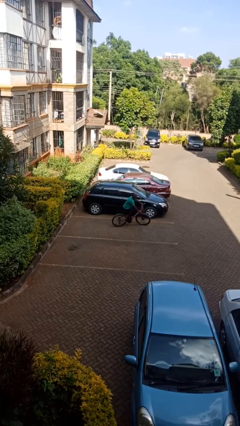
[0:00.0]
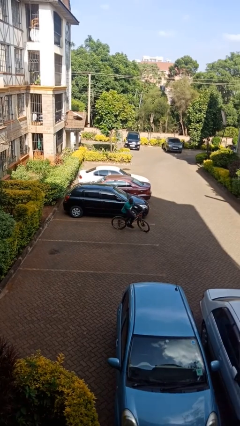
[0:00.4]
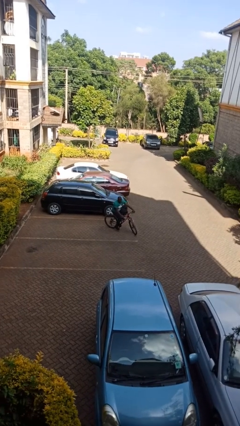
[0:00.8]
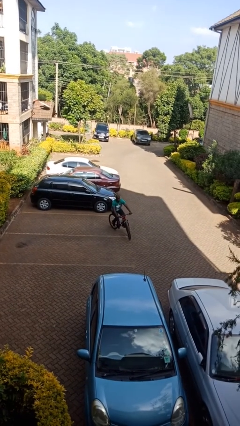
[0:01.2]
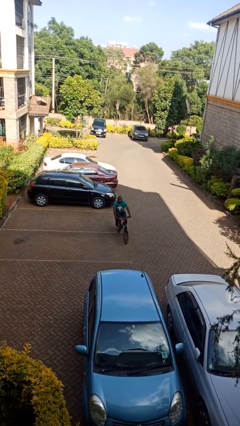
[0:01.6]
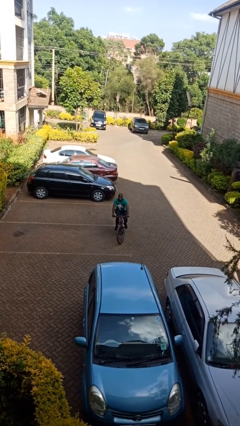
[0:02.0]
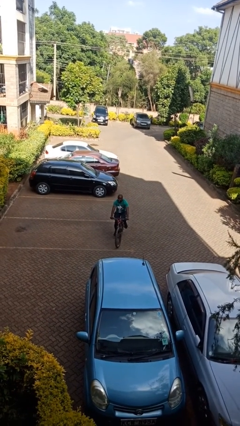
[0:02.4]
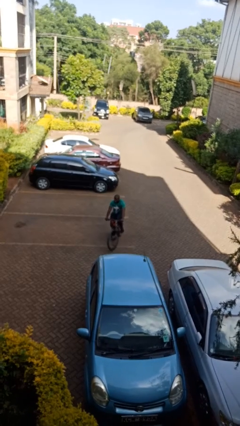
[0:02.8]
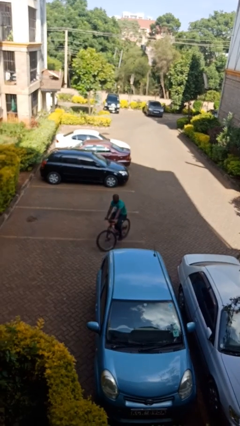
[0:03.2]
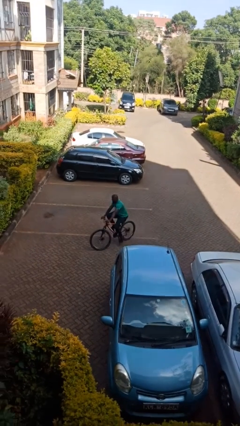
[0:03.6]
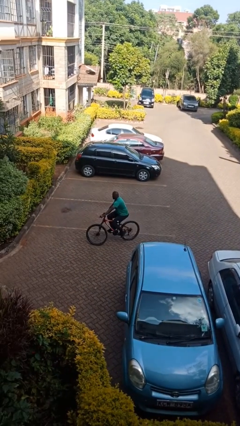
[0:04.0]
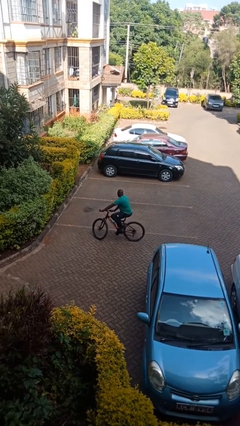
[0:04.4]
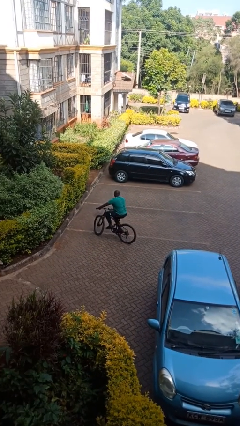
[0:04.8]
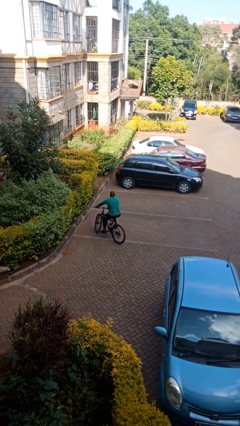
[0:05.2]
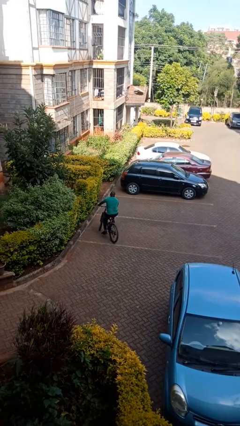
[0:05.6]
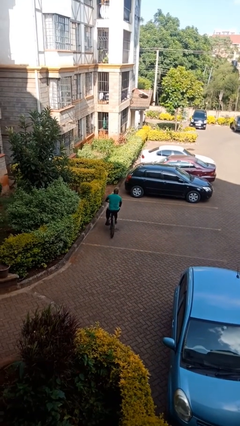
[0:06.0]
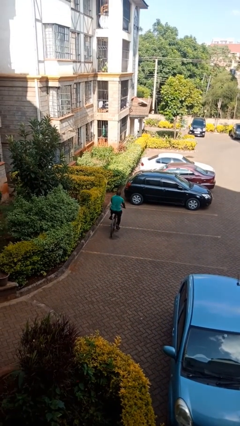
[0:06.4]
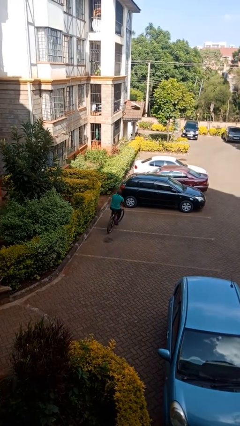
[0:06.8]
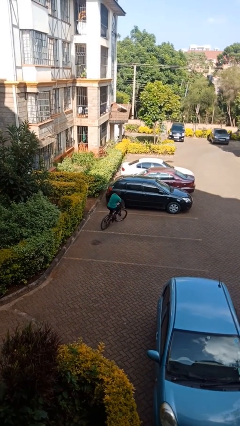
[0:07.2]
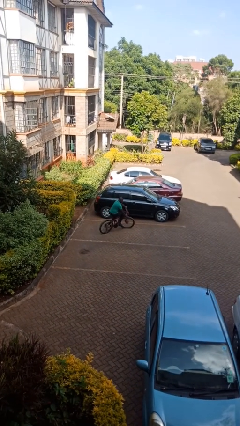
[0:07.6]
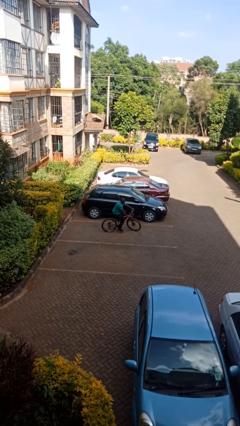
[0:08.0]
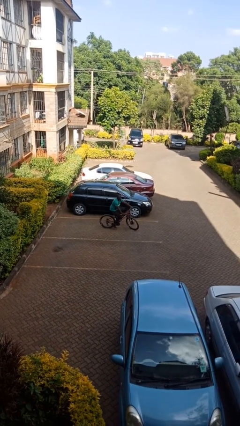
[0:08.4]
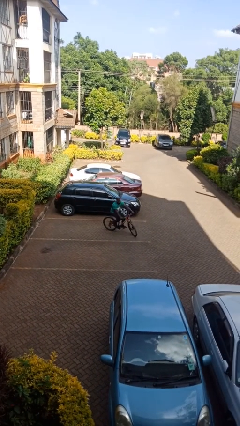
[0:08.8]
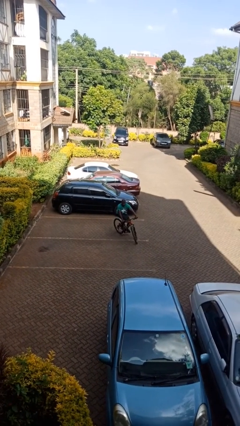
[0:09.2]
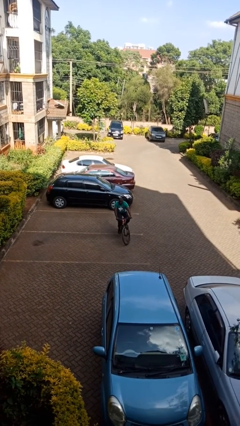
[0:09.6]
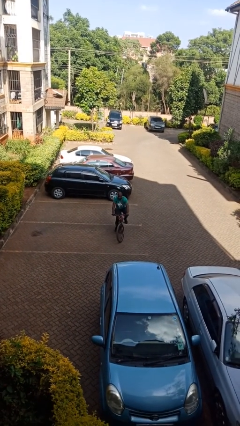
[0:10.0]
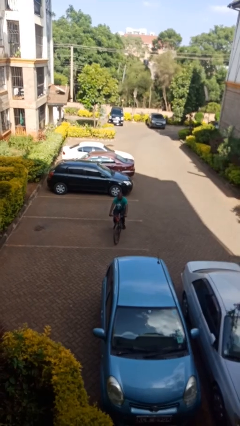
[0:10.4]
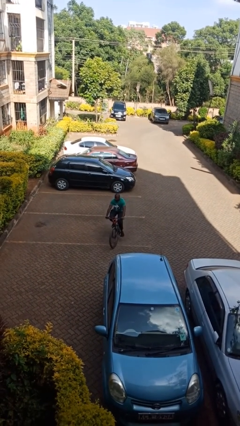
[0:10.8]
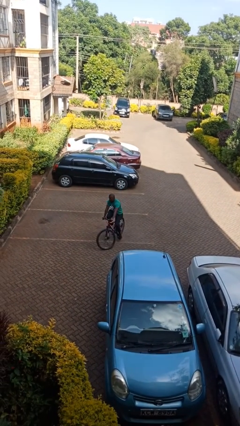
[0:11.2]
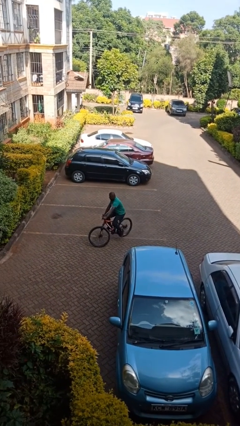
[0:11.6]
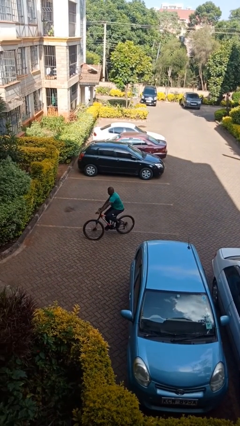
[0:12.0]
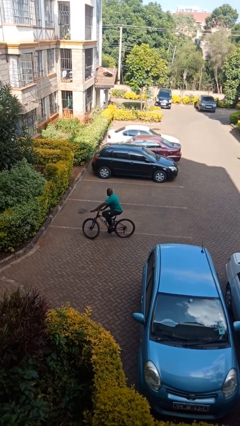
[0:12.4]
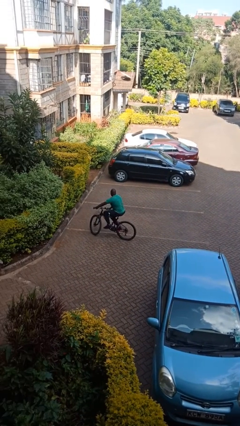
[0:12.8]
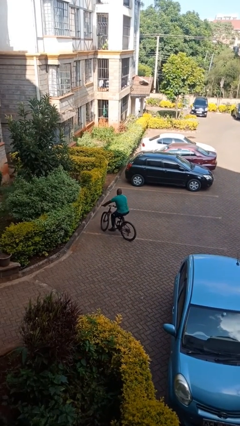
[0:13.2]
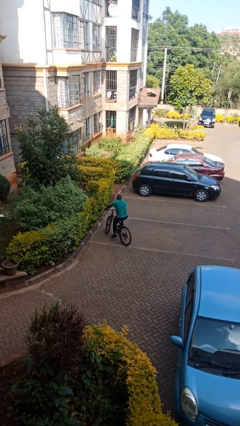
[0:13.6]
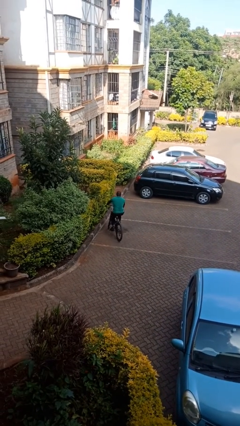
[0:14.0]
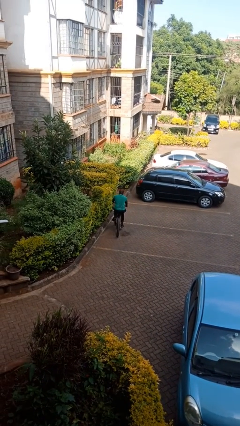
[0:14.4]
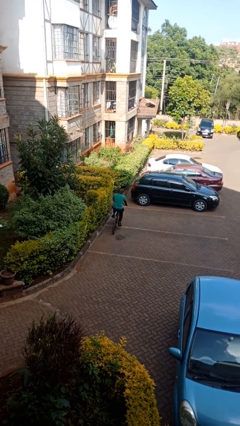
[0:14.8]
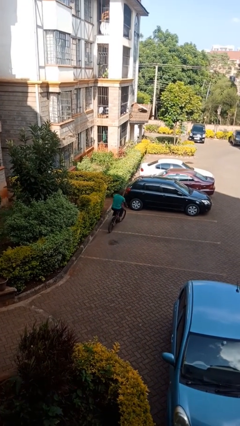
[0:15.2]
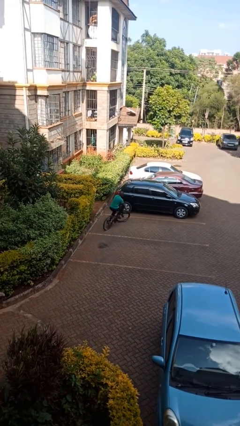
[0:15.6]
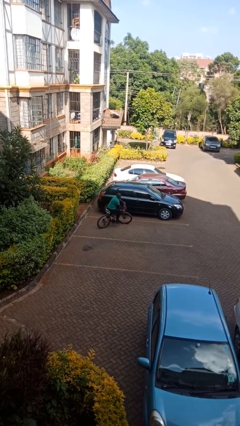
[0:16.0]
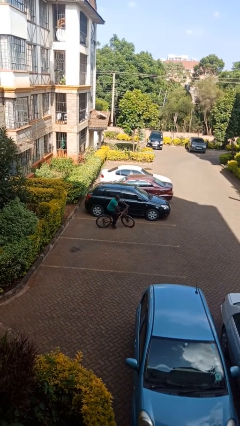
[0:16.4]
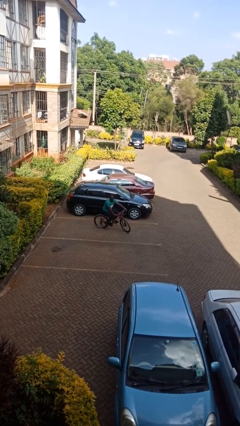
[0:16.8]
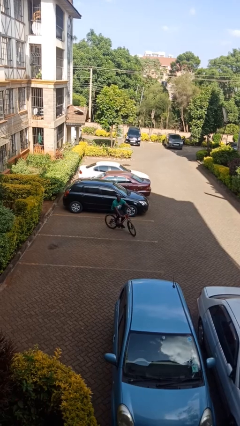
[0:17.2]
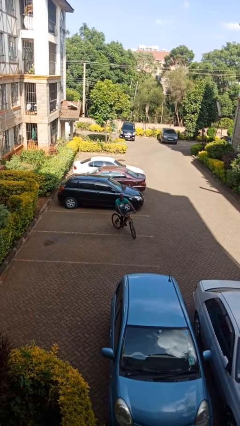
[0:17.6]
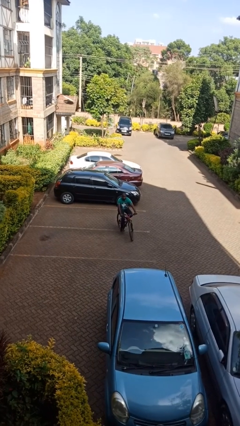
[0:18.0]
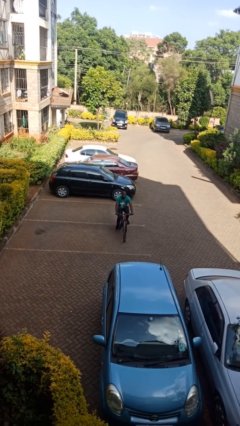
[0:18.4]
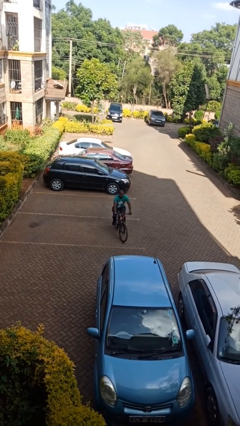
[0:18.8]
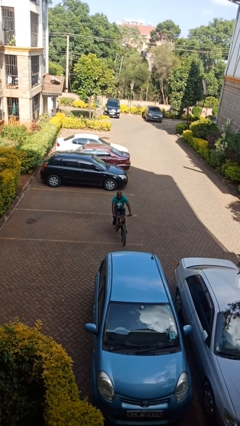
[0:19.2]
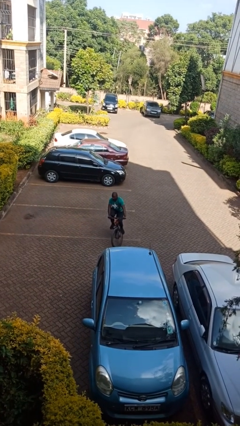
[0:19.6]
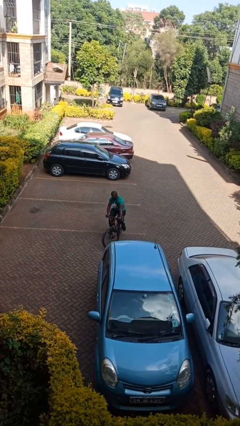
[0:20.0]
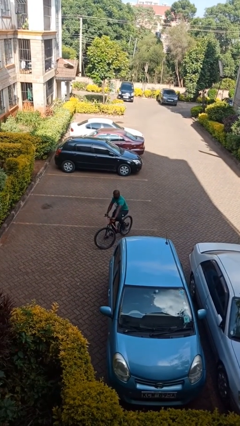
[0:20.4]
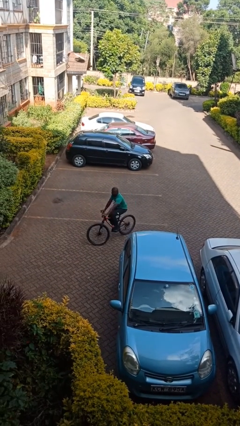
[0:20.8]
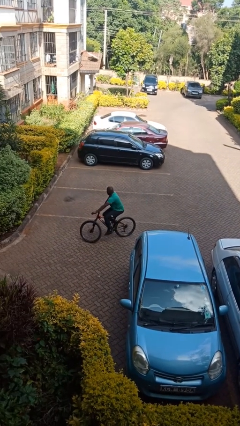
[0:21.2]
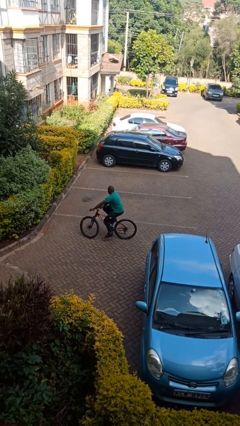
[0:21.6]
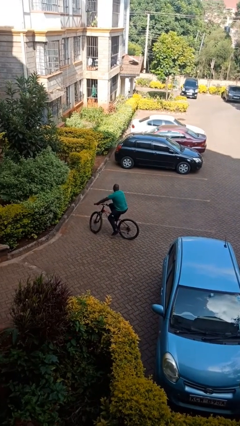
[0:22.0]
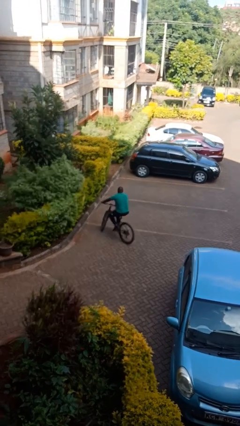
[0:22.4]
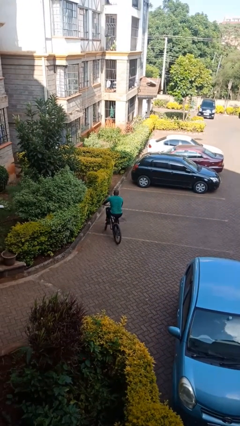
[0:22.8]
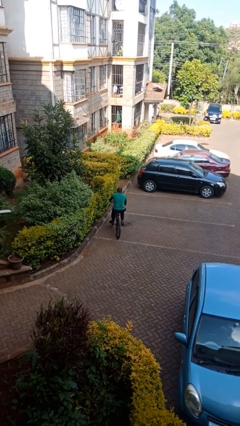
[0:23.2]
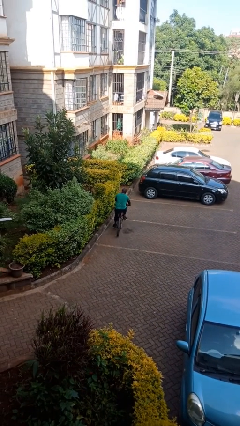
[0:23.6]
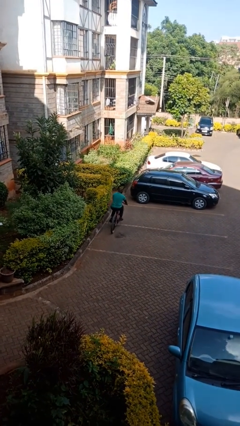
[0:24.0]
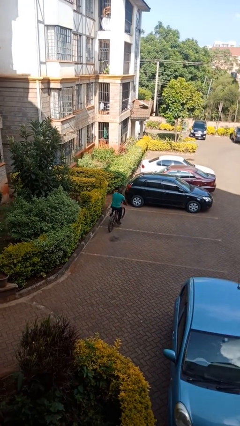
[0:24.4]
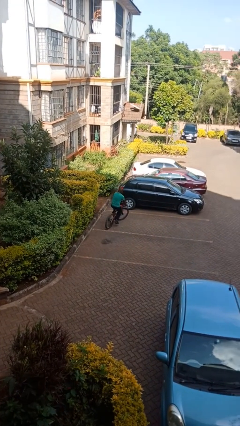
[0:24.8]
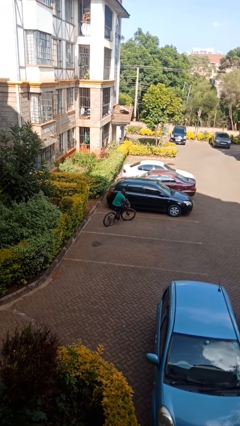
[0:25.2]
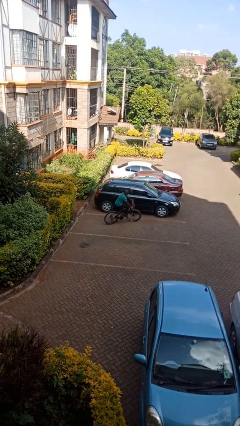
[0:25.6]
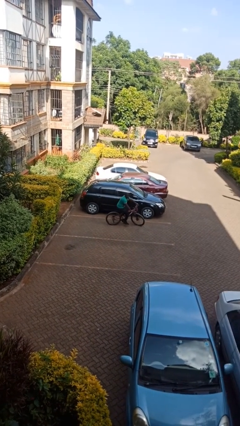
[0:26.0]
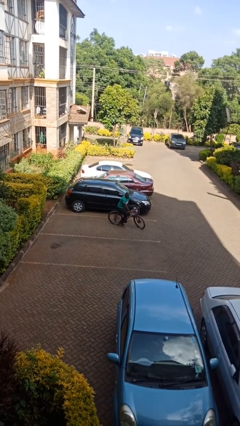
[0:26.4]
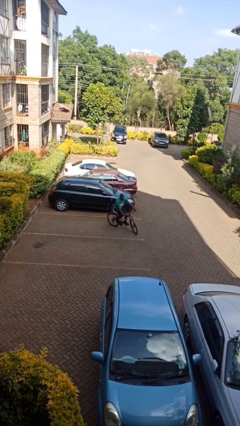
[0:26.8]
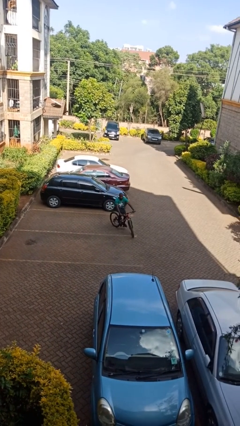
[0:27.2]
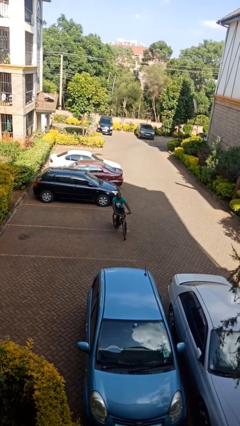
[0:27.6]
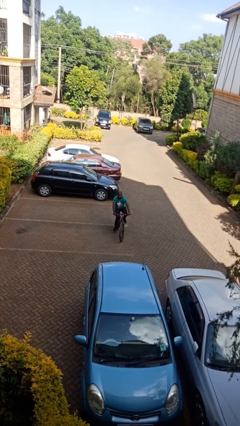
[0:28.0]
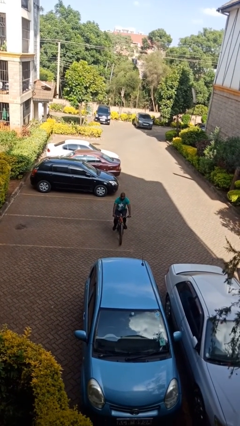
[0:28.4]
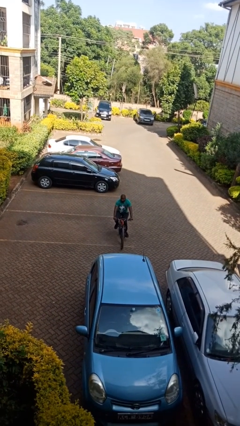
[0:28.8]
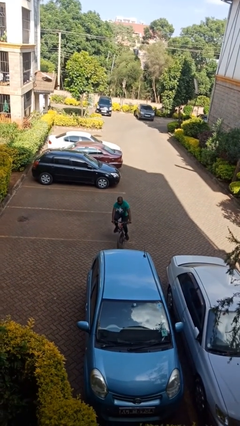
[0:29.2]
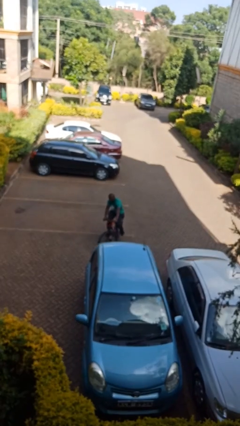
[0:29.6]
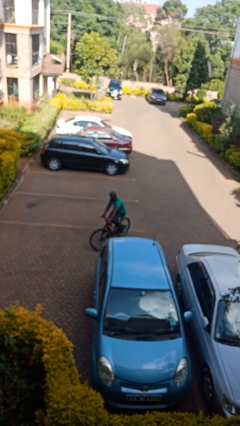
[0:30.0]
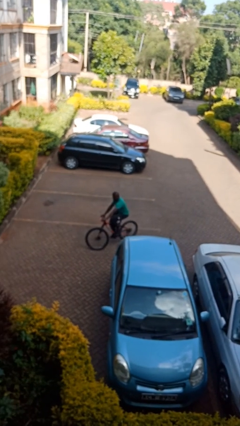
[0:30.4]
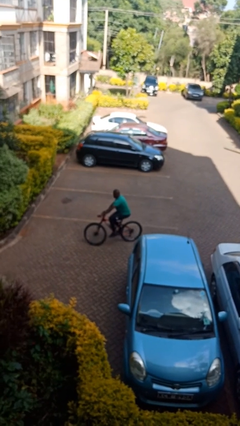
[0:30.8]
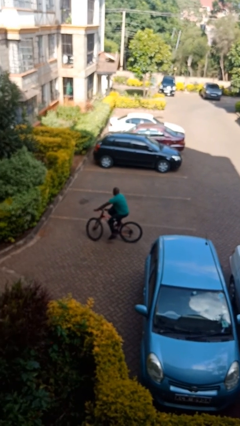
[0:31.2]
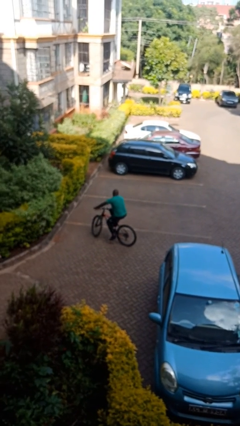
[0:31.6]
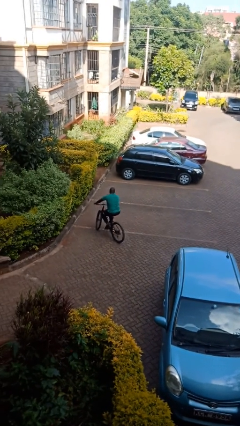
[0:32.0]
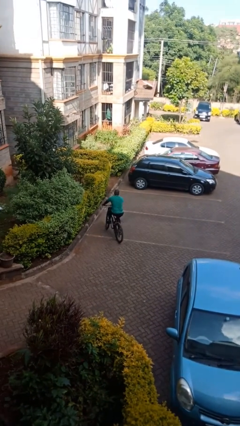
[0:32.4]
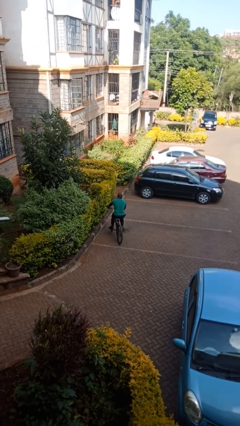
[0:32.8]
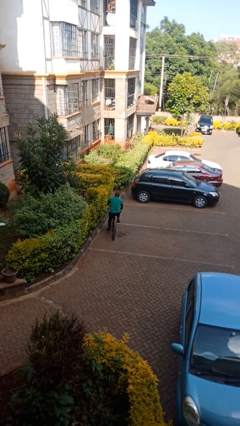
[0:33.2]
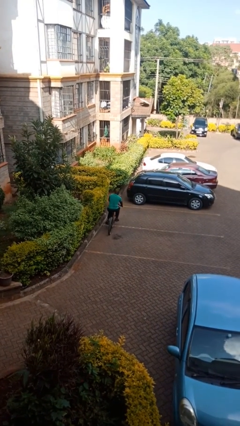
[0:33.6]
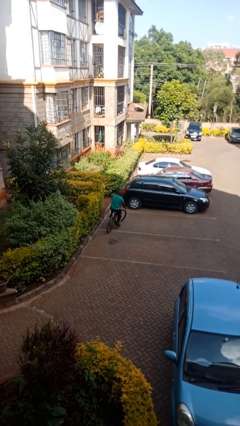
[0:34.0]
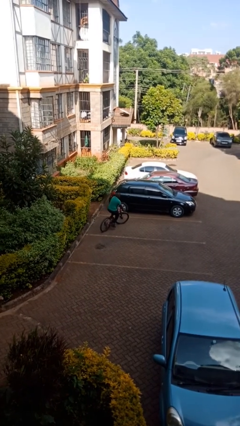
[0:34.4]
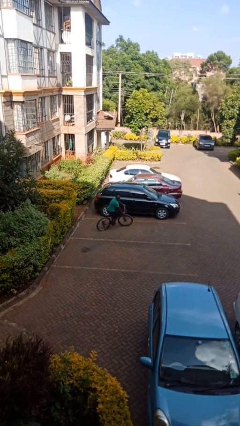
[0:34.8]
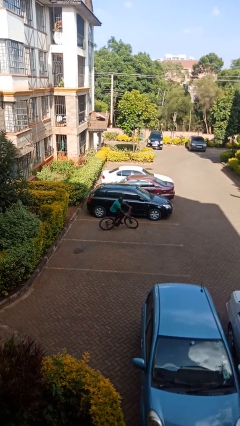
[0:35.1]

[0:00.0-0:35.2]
person rides bicycle

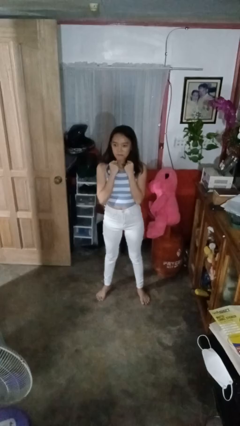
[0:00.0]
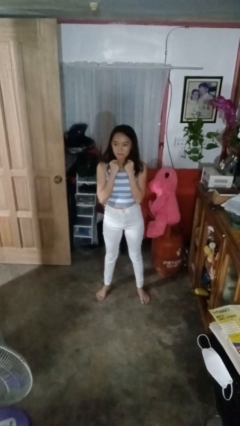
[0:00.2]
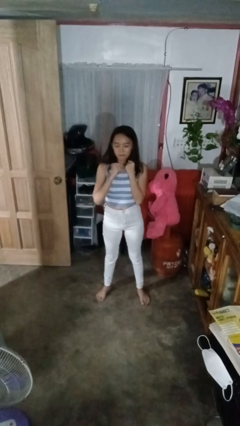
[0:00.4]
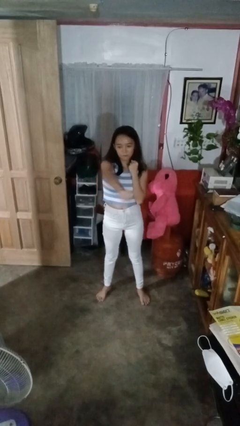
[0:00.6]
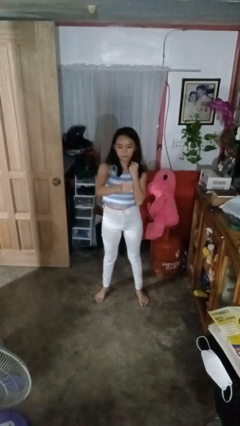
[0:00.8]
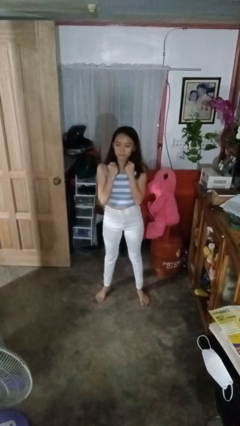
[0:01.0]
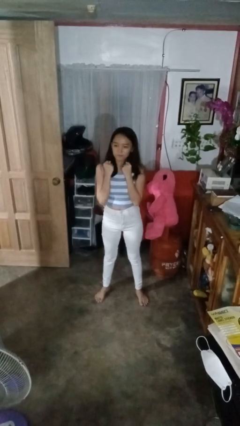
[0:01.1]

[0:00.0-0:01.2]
person punches
